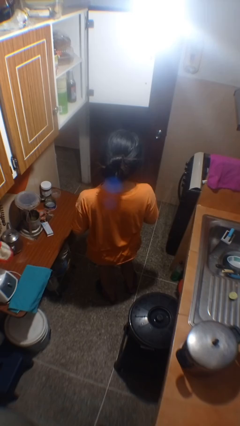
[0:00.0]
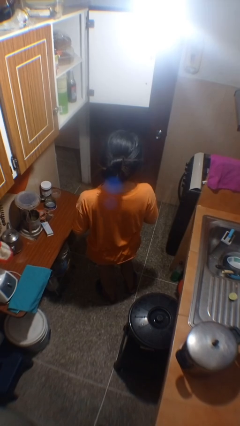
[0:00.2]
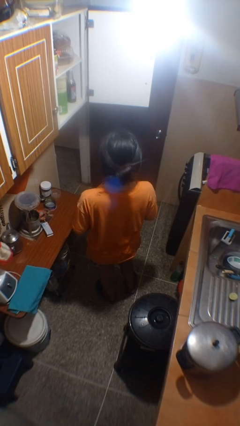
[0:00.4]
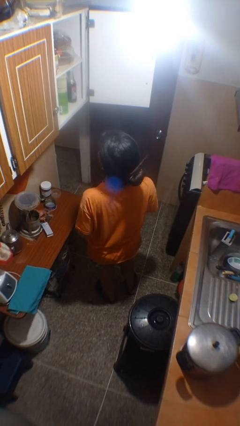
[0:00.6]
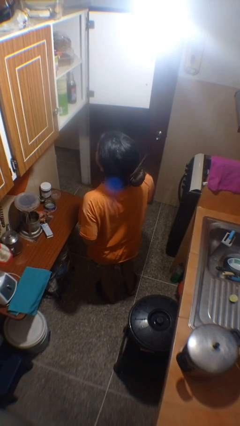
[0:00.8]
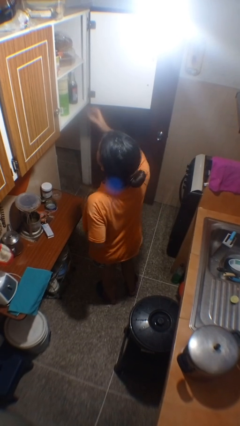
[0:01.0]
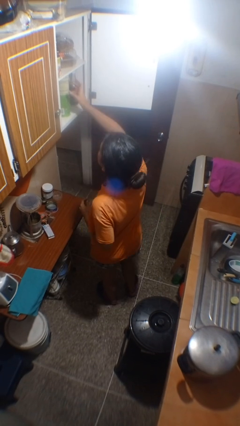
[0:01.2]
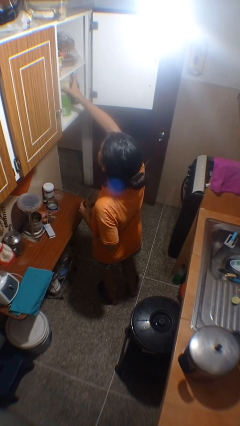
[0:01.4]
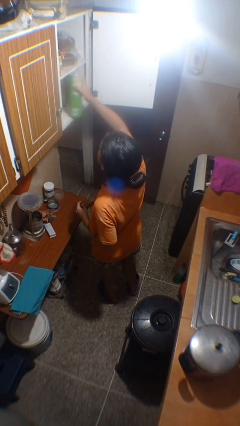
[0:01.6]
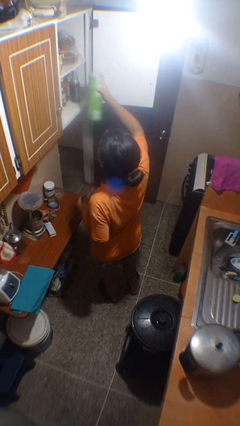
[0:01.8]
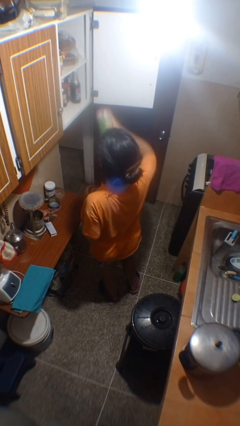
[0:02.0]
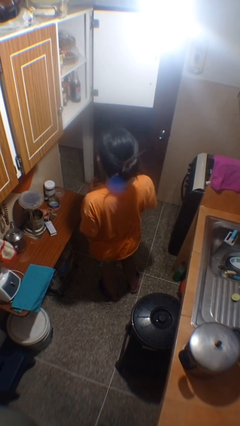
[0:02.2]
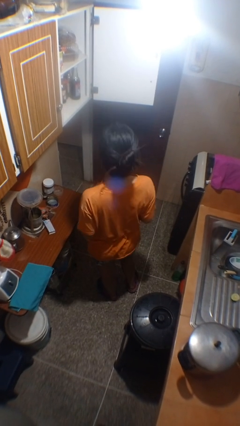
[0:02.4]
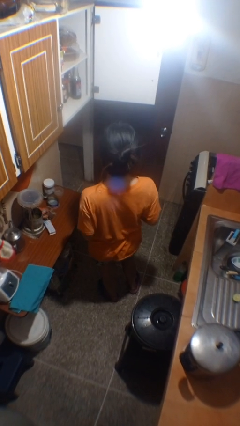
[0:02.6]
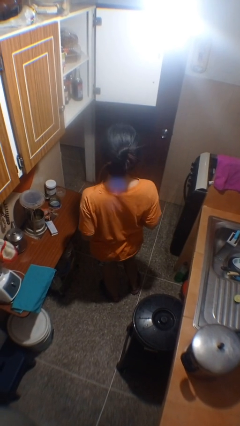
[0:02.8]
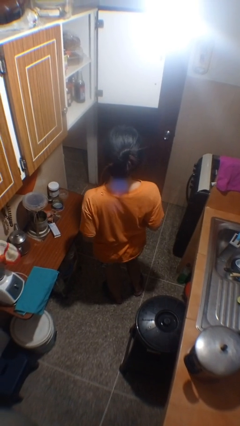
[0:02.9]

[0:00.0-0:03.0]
person takes object from cabinet

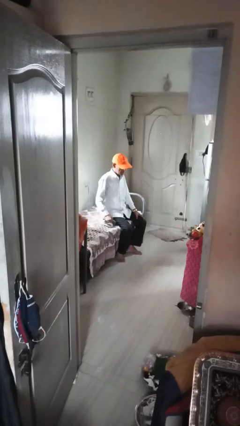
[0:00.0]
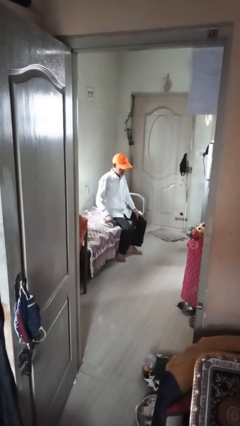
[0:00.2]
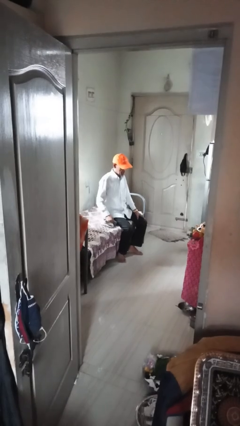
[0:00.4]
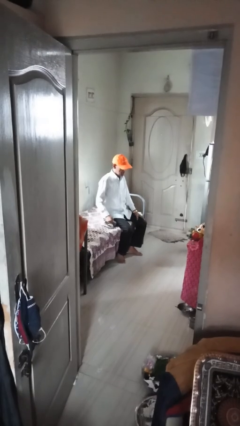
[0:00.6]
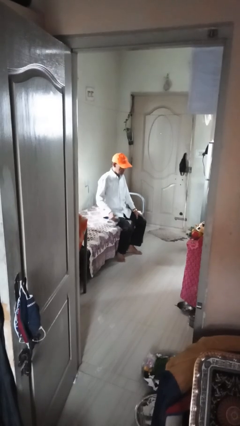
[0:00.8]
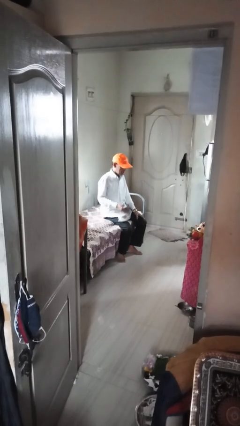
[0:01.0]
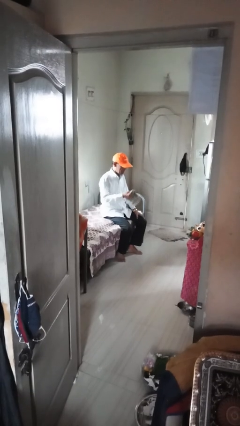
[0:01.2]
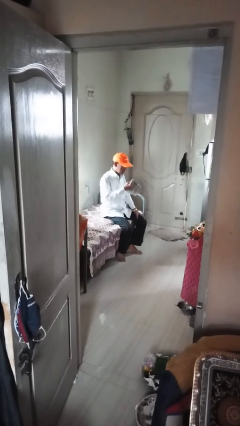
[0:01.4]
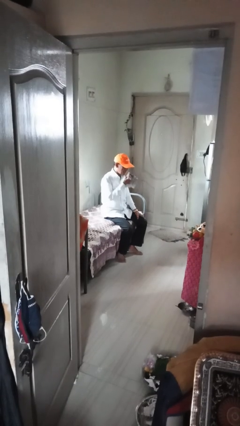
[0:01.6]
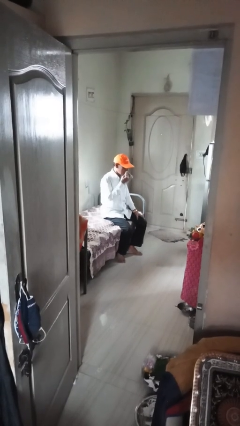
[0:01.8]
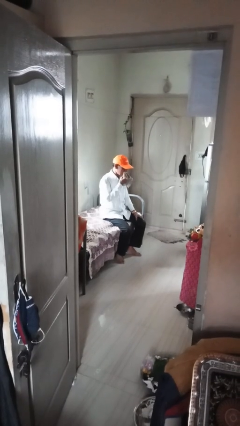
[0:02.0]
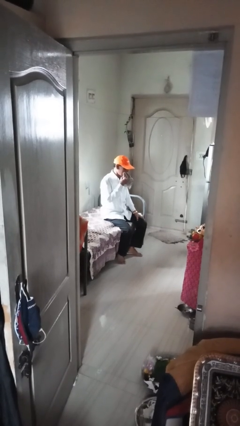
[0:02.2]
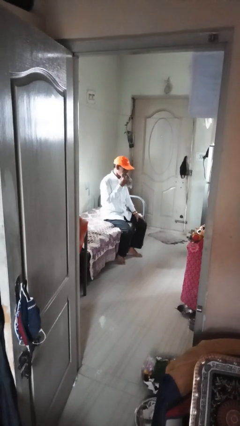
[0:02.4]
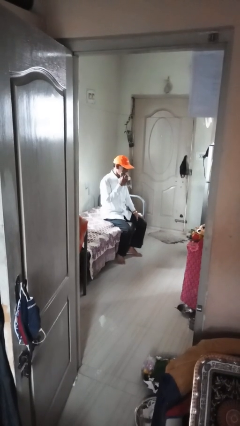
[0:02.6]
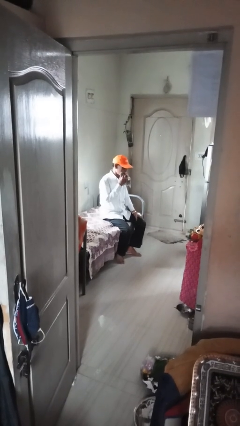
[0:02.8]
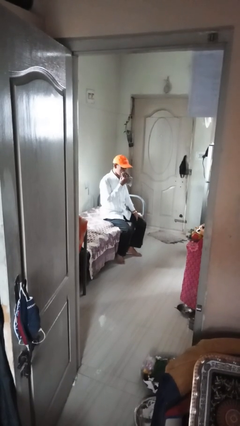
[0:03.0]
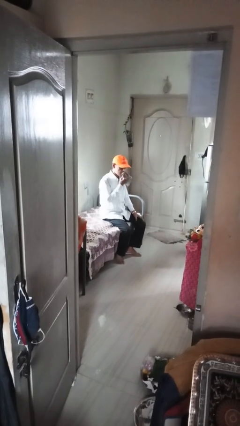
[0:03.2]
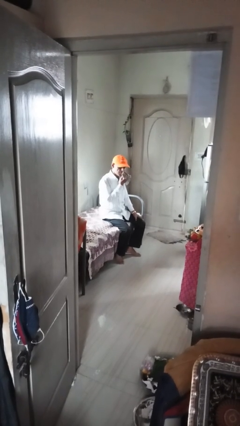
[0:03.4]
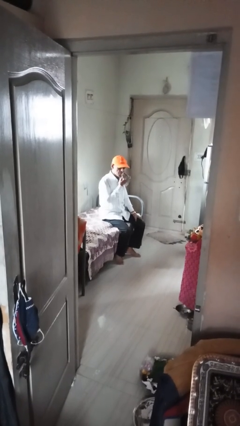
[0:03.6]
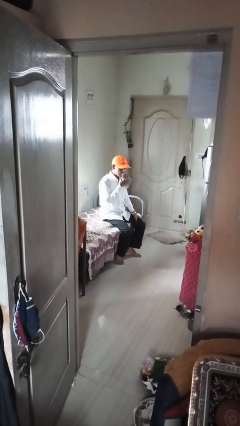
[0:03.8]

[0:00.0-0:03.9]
person wipes mouth with napkin

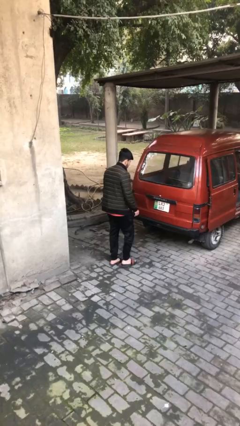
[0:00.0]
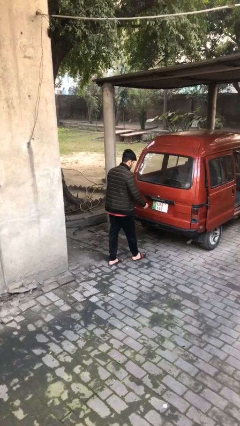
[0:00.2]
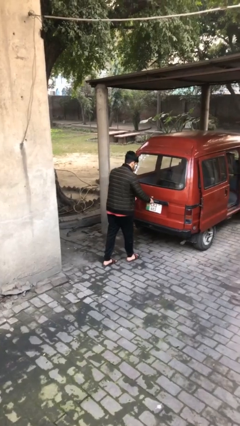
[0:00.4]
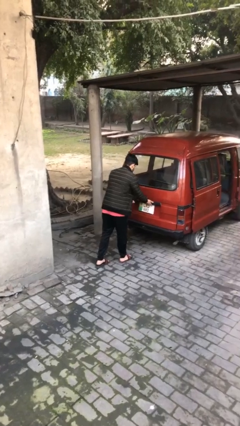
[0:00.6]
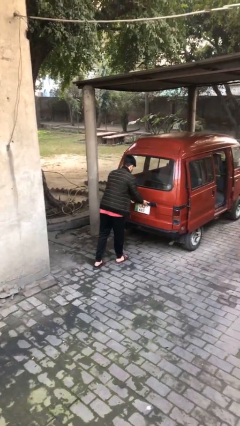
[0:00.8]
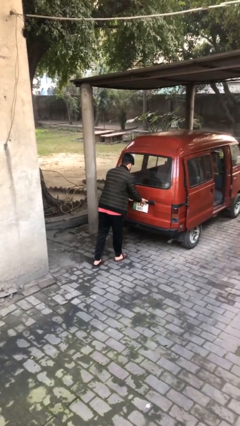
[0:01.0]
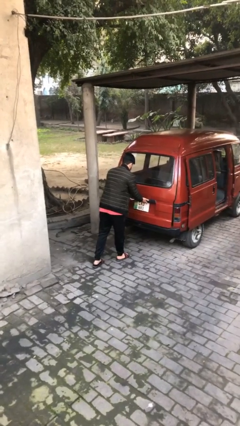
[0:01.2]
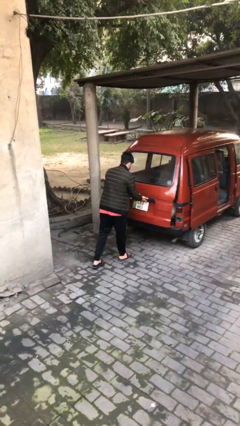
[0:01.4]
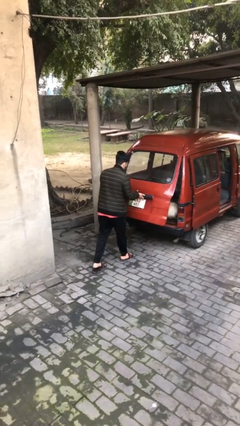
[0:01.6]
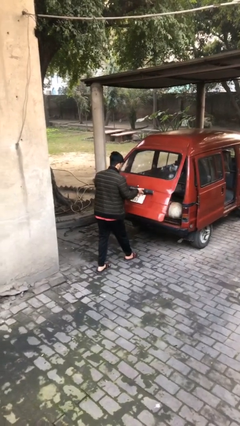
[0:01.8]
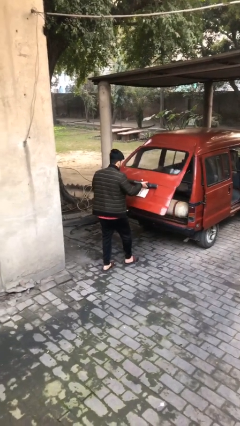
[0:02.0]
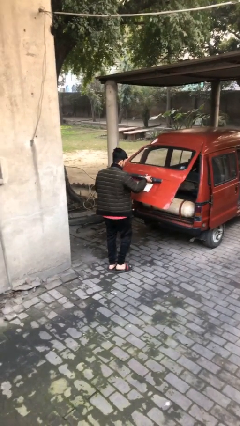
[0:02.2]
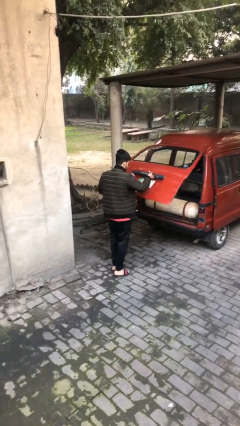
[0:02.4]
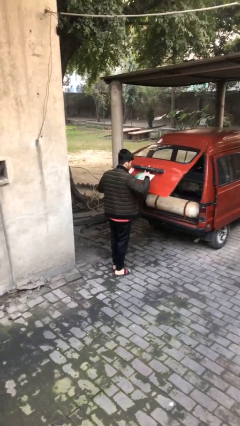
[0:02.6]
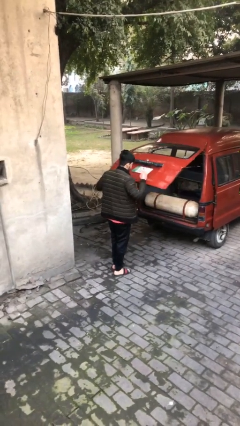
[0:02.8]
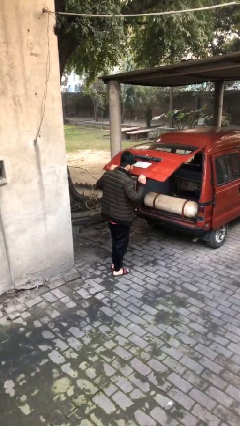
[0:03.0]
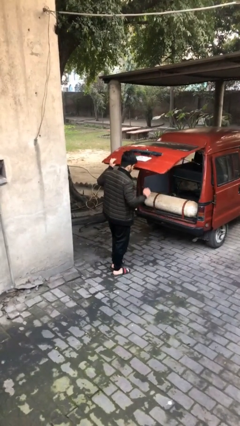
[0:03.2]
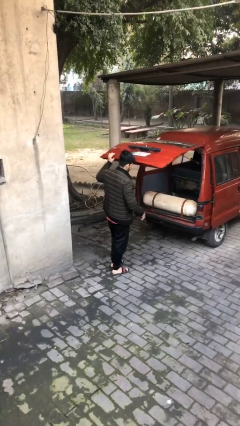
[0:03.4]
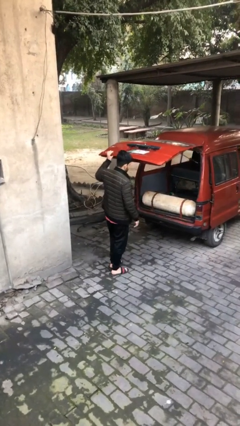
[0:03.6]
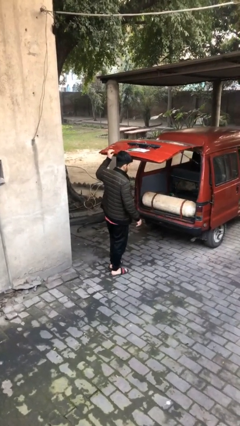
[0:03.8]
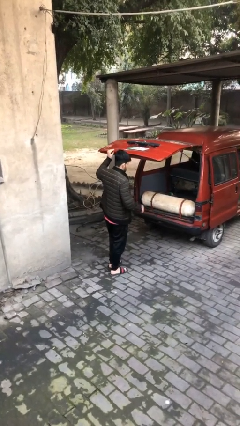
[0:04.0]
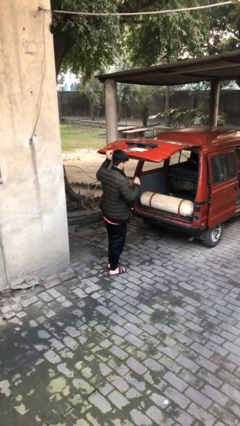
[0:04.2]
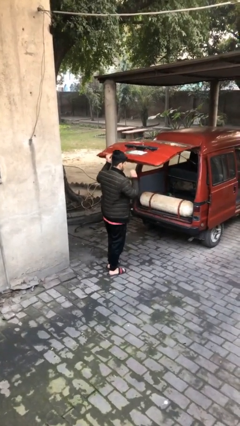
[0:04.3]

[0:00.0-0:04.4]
person opens car trunk

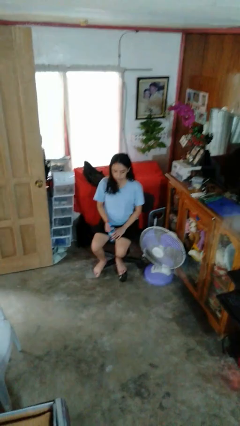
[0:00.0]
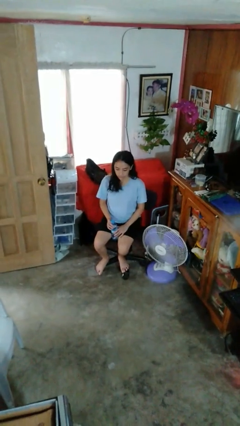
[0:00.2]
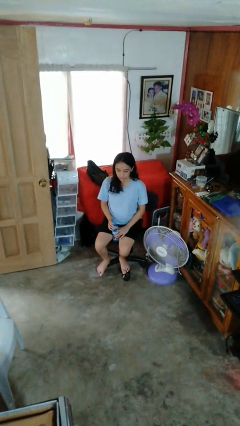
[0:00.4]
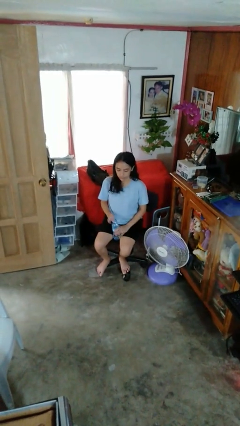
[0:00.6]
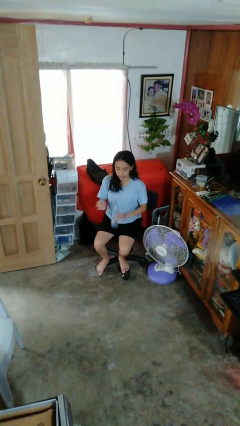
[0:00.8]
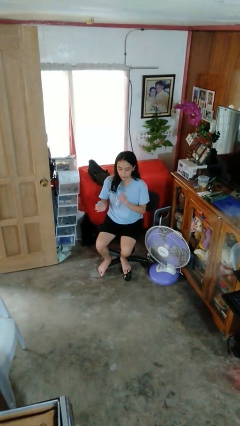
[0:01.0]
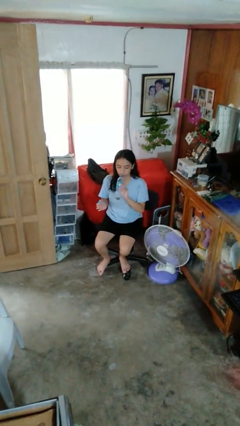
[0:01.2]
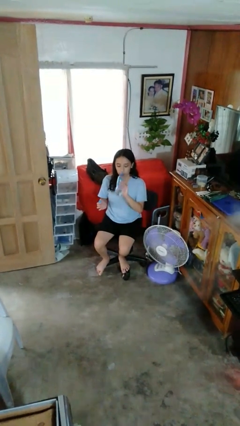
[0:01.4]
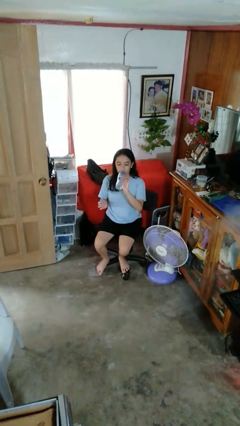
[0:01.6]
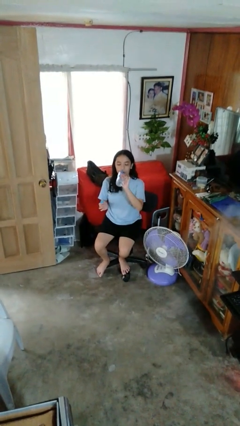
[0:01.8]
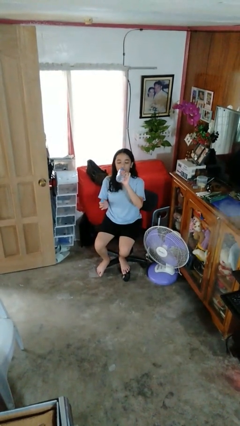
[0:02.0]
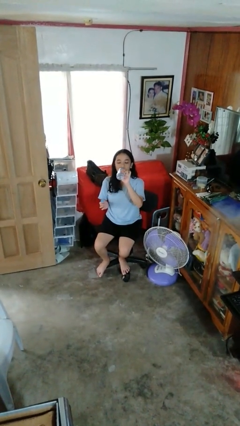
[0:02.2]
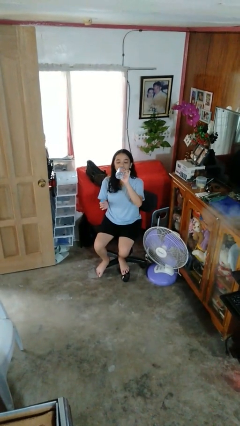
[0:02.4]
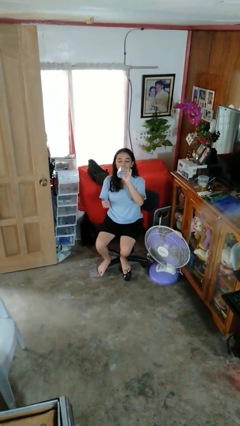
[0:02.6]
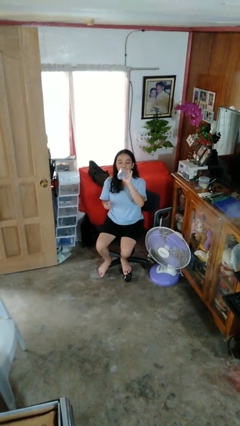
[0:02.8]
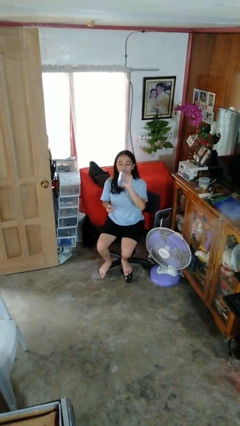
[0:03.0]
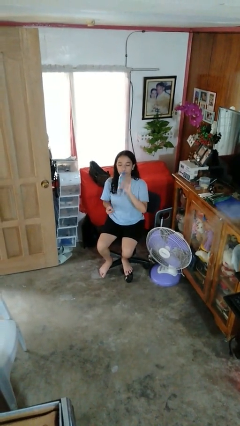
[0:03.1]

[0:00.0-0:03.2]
person drinks from bottle

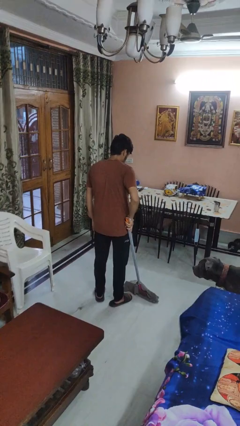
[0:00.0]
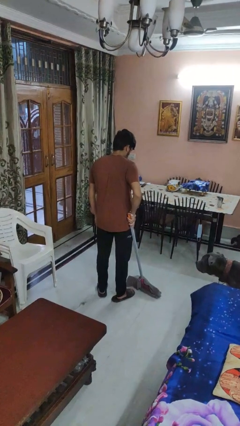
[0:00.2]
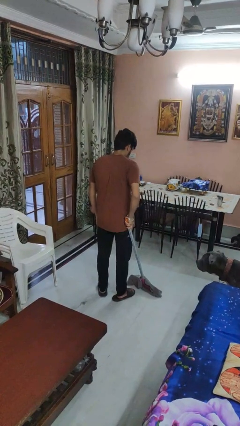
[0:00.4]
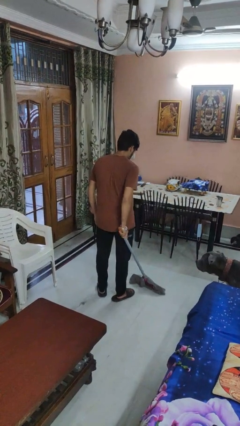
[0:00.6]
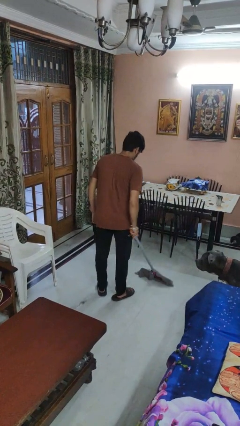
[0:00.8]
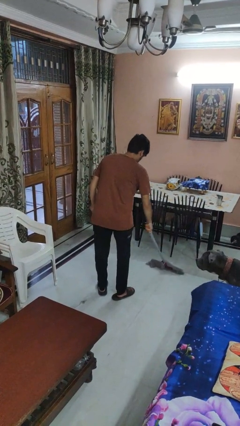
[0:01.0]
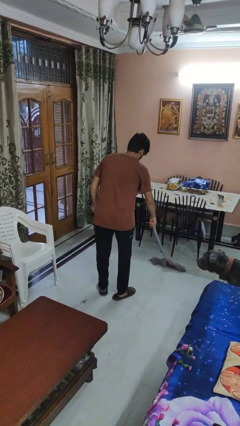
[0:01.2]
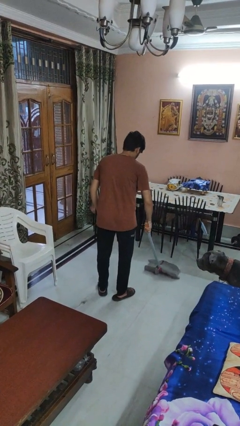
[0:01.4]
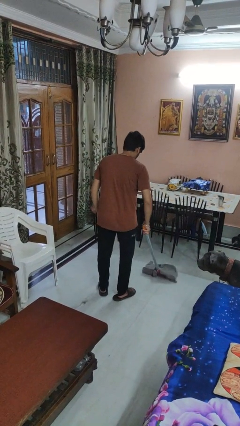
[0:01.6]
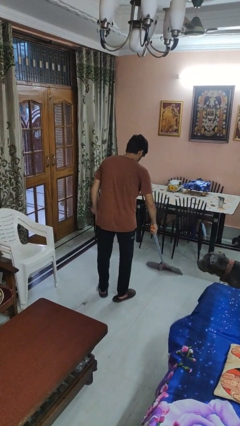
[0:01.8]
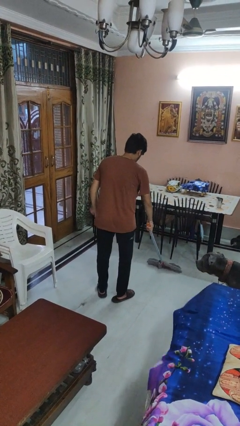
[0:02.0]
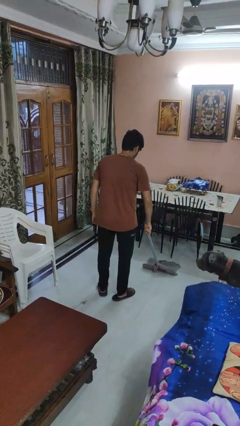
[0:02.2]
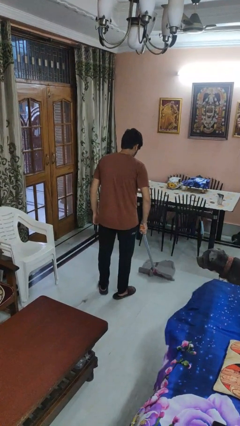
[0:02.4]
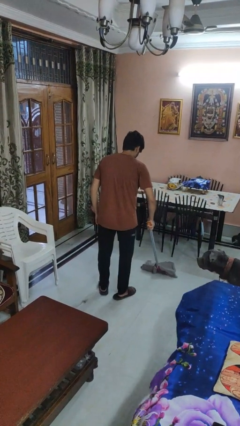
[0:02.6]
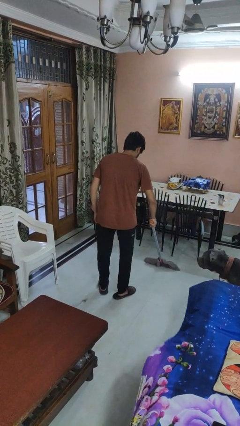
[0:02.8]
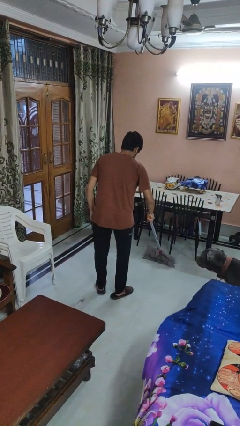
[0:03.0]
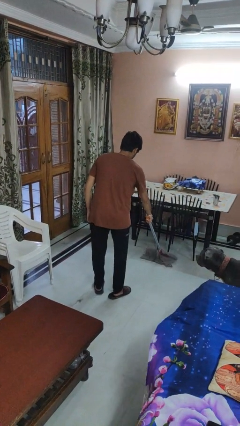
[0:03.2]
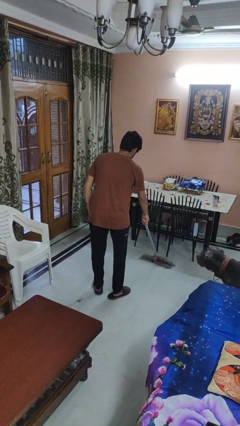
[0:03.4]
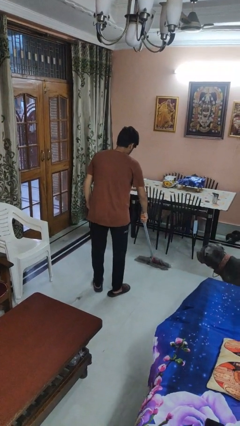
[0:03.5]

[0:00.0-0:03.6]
person mops
